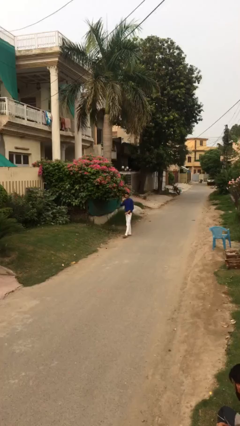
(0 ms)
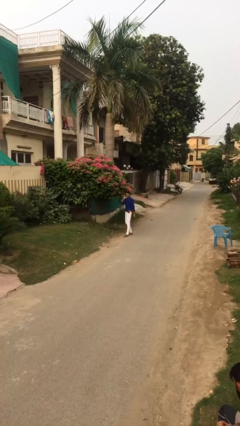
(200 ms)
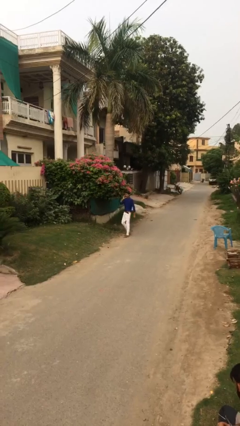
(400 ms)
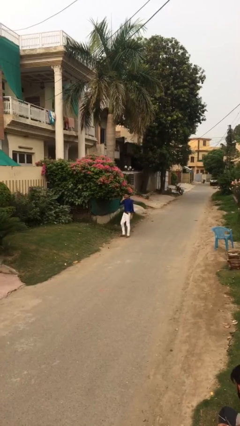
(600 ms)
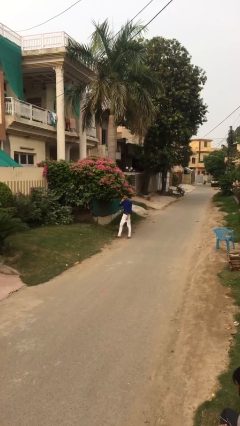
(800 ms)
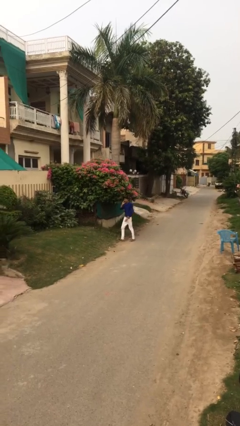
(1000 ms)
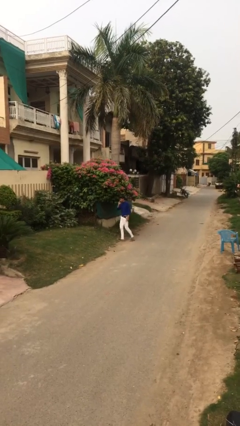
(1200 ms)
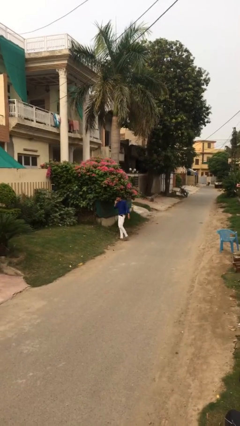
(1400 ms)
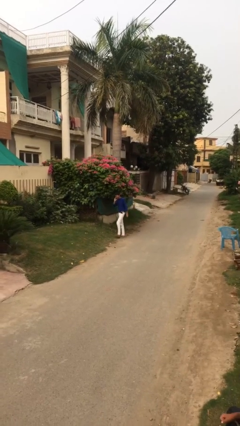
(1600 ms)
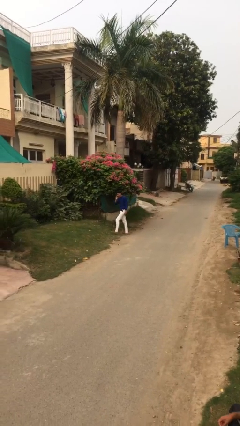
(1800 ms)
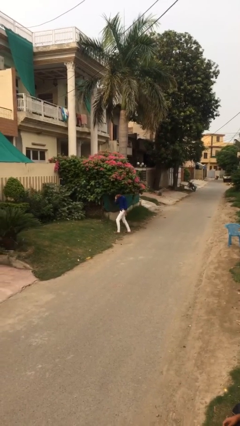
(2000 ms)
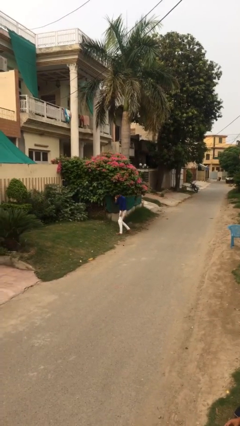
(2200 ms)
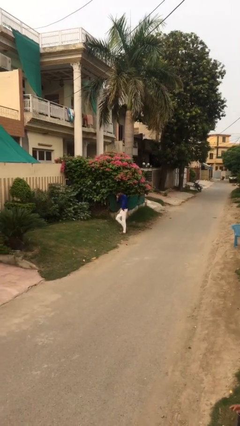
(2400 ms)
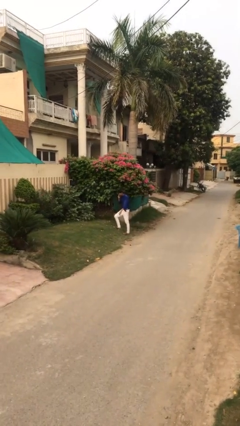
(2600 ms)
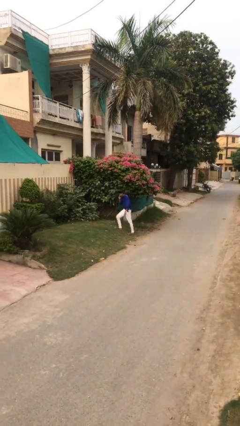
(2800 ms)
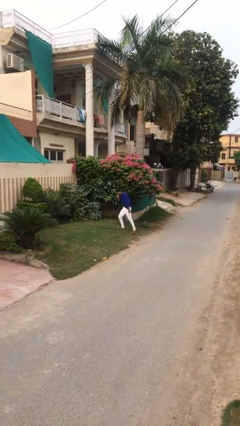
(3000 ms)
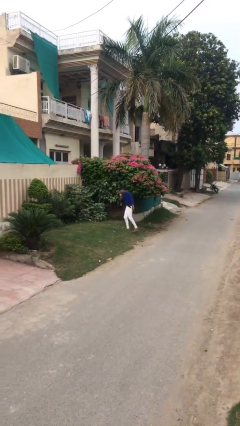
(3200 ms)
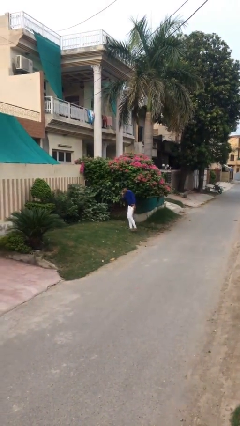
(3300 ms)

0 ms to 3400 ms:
person talks on phone

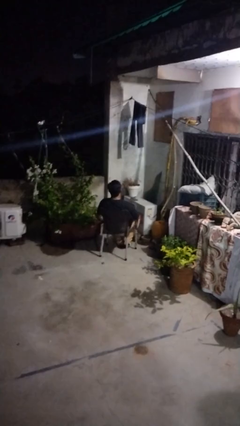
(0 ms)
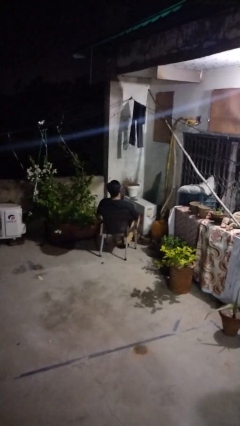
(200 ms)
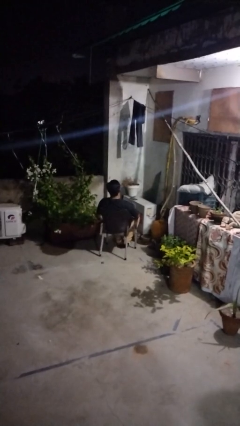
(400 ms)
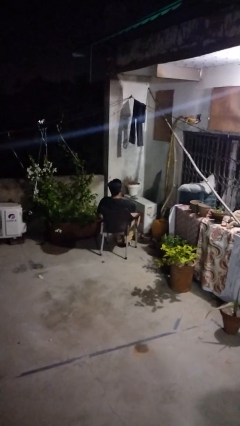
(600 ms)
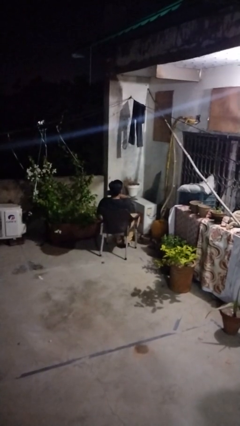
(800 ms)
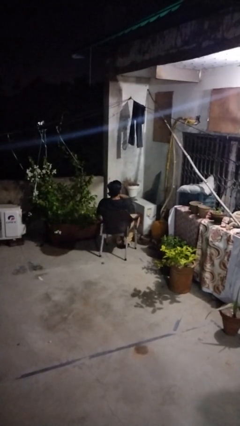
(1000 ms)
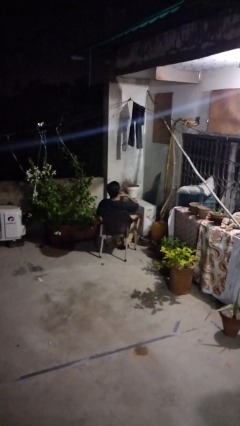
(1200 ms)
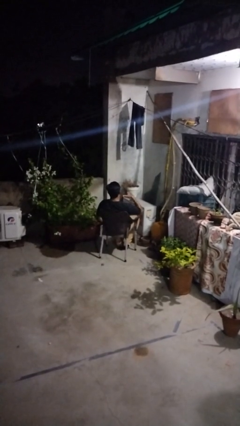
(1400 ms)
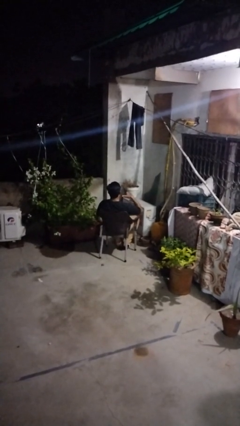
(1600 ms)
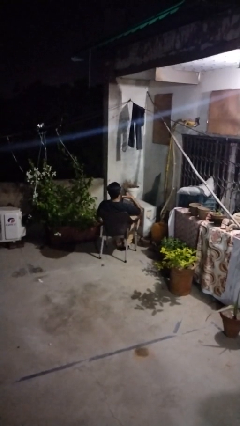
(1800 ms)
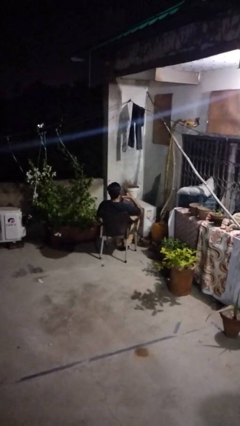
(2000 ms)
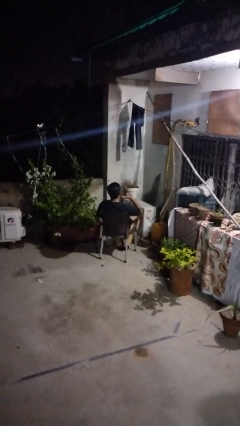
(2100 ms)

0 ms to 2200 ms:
person gestures cut

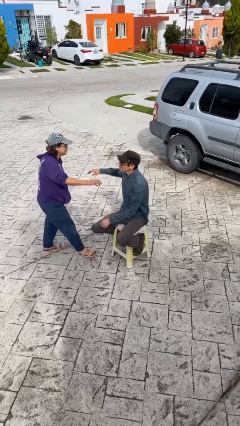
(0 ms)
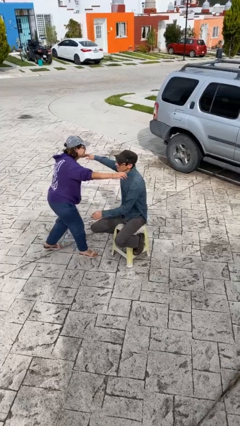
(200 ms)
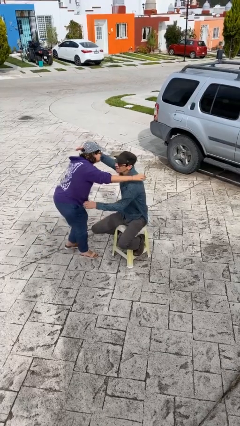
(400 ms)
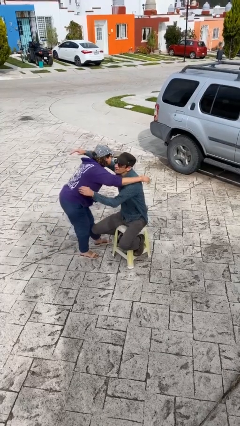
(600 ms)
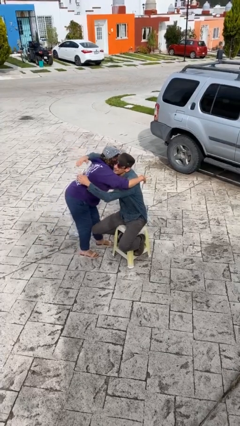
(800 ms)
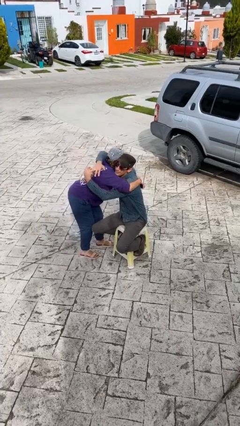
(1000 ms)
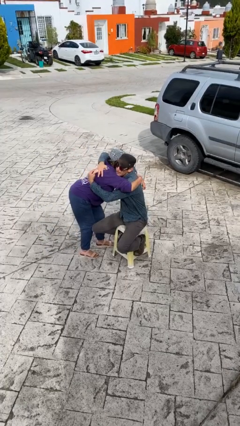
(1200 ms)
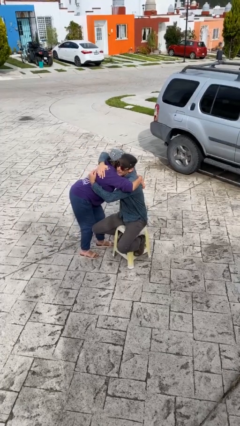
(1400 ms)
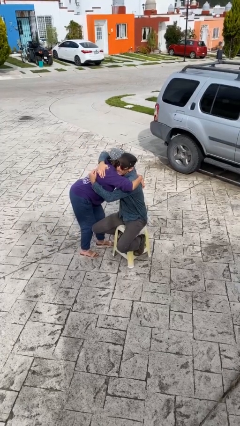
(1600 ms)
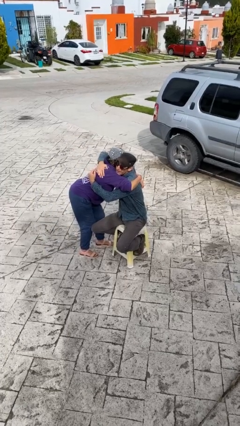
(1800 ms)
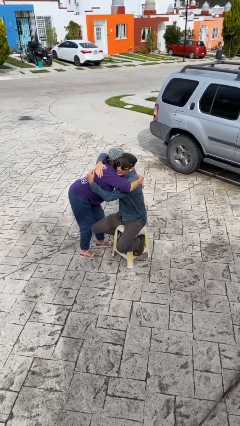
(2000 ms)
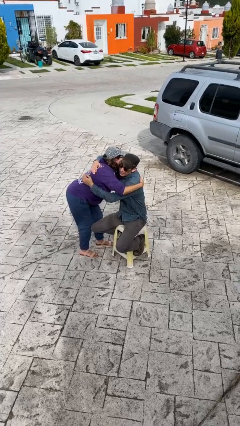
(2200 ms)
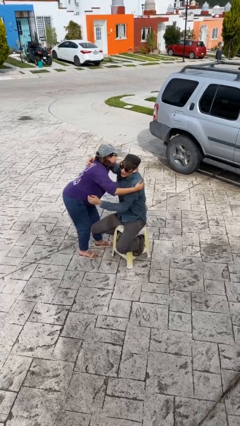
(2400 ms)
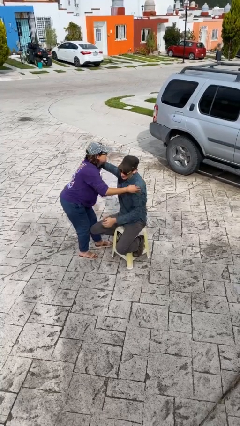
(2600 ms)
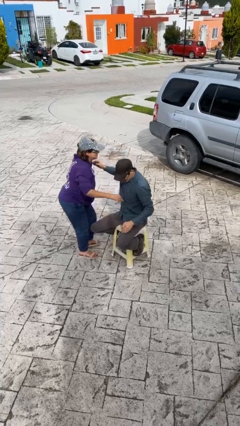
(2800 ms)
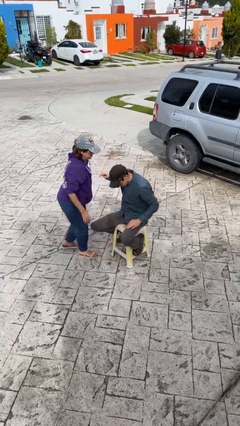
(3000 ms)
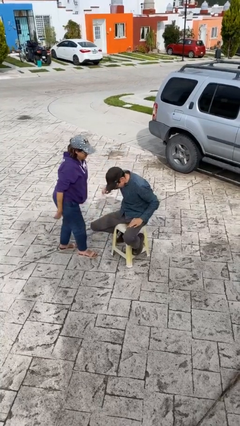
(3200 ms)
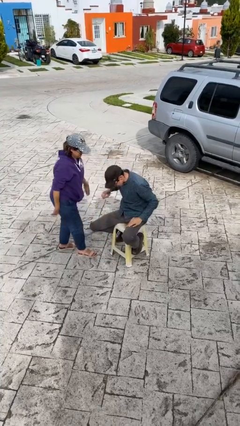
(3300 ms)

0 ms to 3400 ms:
person embraces person

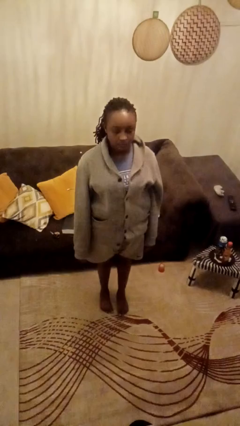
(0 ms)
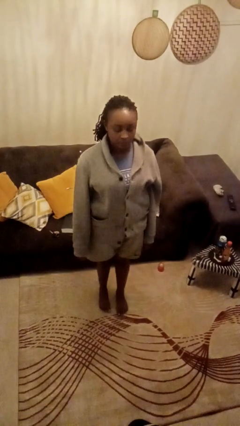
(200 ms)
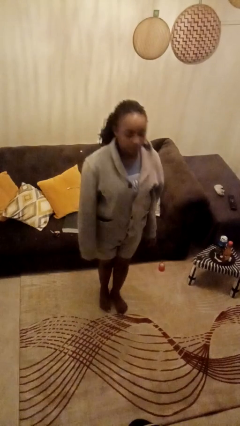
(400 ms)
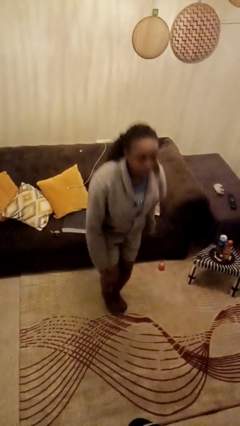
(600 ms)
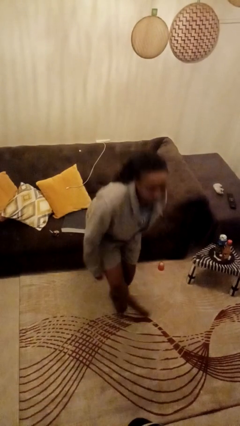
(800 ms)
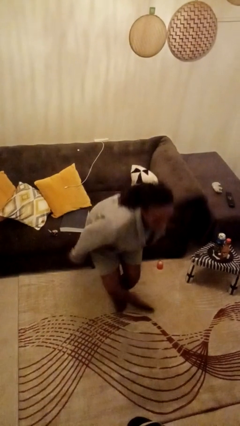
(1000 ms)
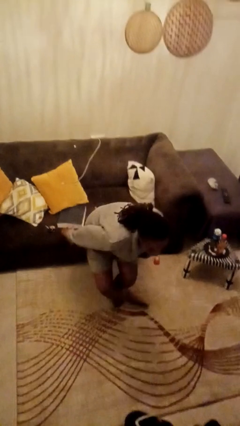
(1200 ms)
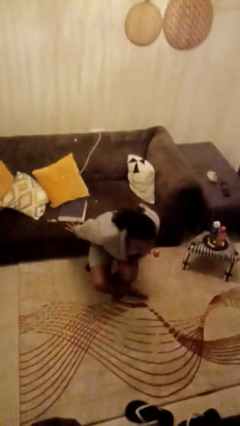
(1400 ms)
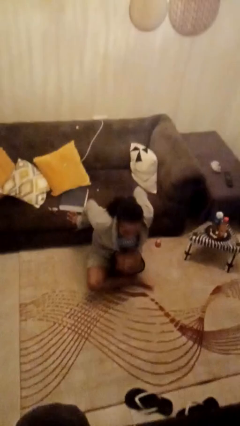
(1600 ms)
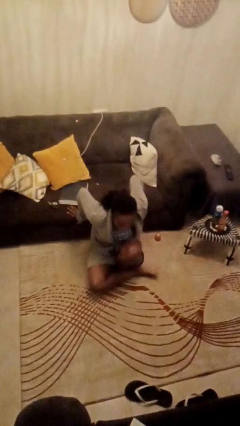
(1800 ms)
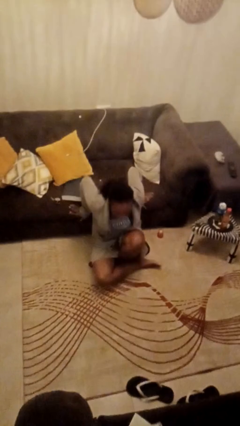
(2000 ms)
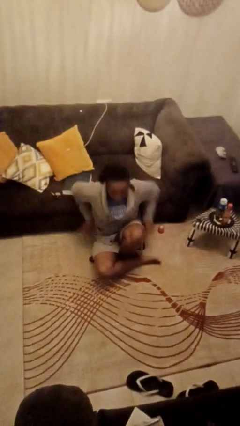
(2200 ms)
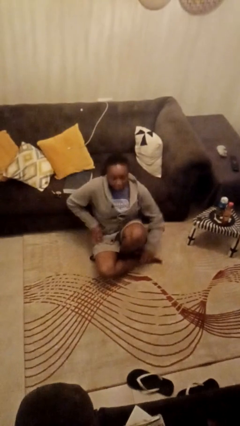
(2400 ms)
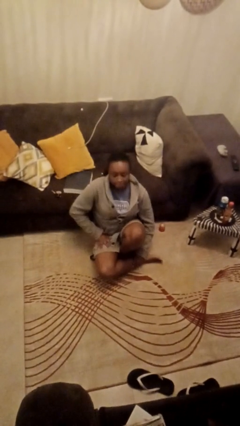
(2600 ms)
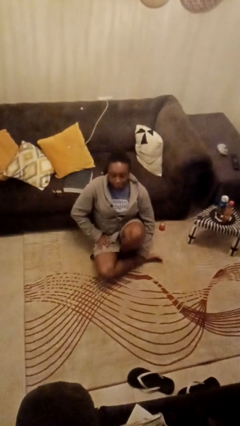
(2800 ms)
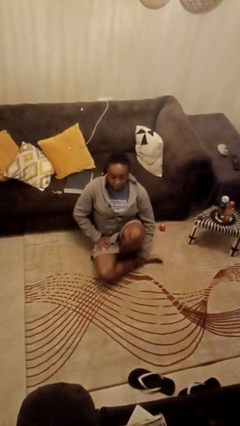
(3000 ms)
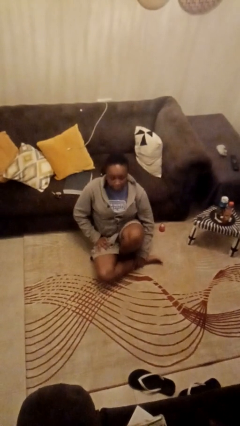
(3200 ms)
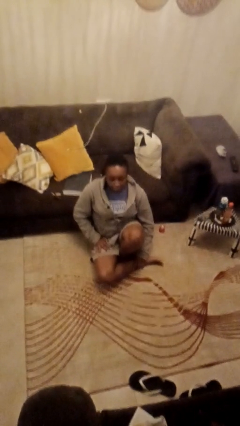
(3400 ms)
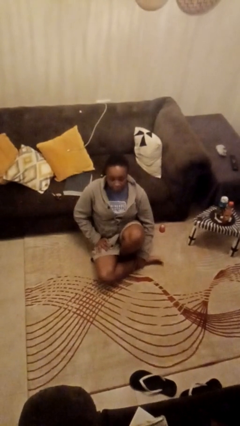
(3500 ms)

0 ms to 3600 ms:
person sits crisscross

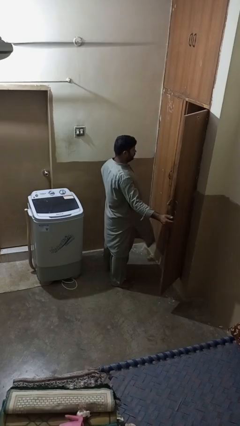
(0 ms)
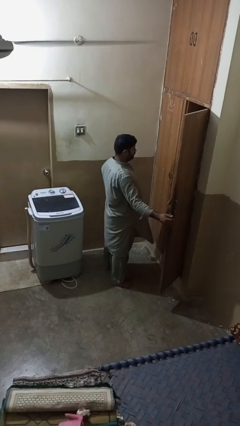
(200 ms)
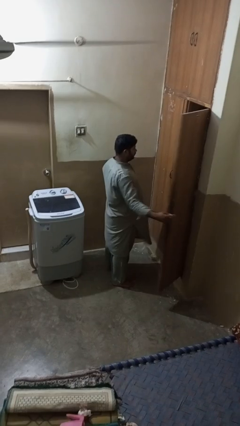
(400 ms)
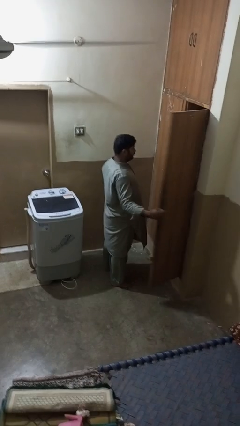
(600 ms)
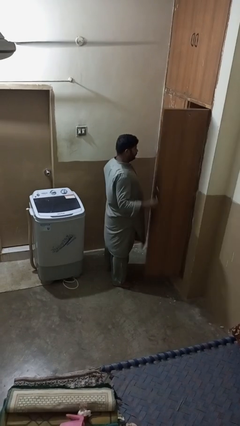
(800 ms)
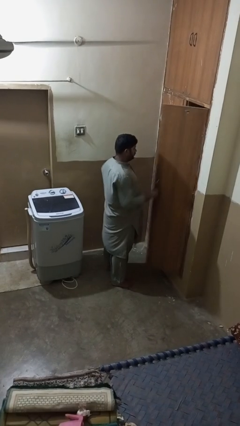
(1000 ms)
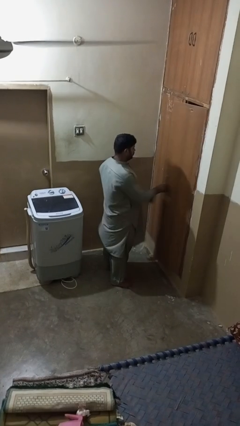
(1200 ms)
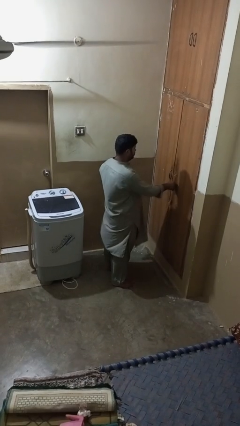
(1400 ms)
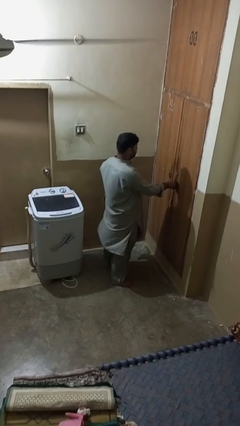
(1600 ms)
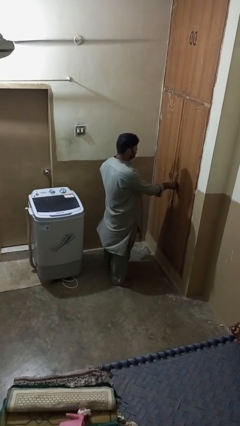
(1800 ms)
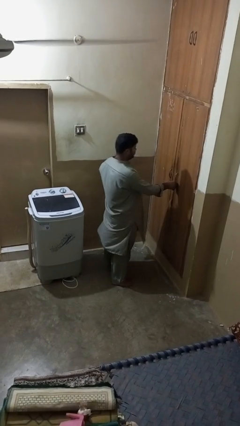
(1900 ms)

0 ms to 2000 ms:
person closes closet door

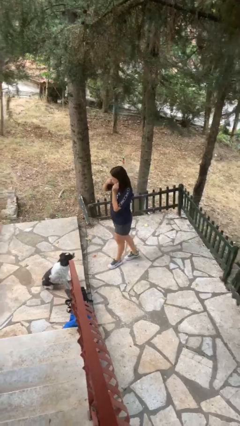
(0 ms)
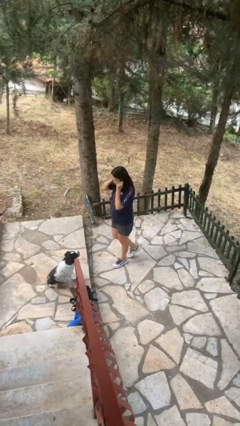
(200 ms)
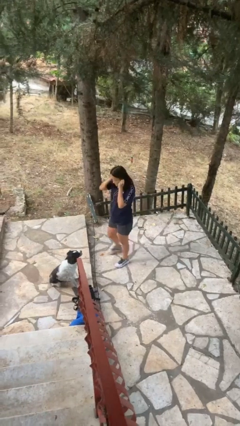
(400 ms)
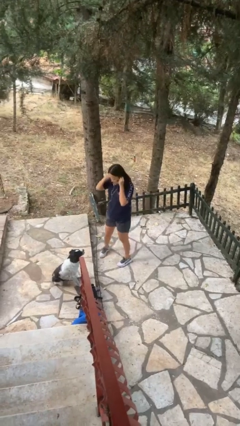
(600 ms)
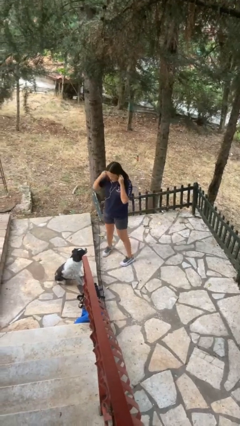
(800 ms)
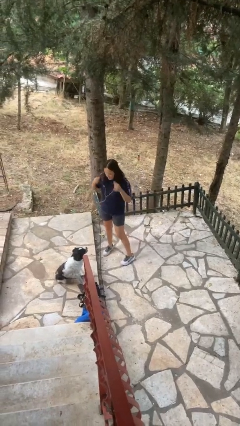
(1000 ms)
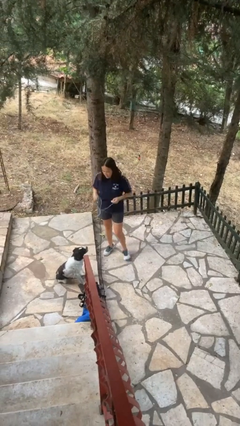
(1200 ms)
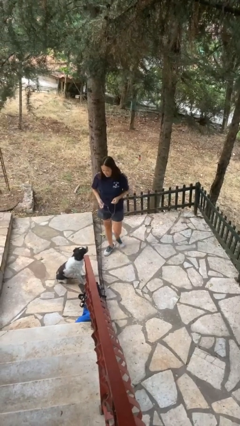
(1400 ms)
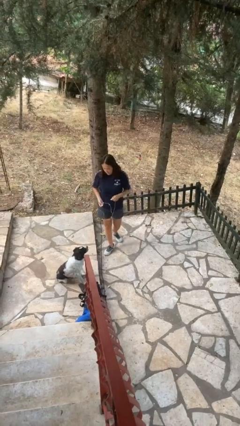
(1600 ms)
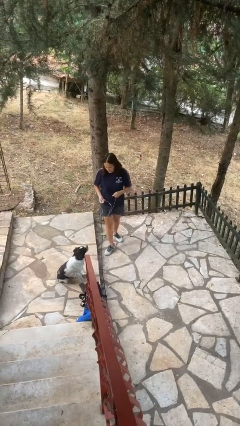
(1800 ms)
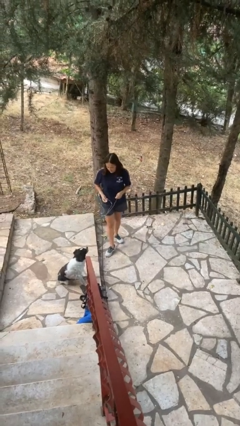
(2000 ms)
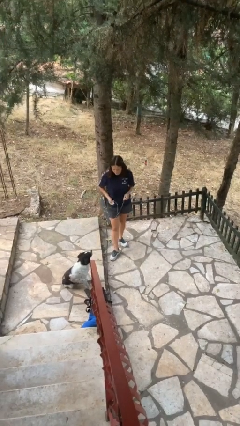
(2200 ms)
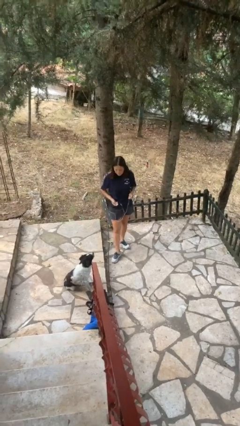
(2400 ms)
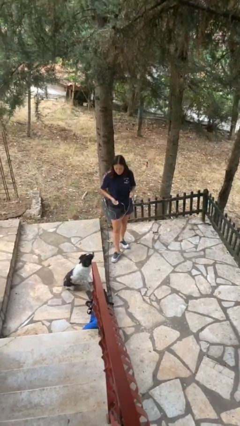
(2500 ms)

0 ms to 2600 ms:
person takes off headphones

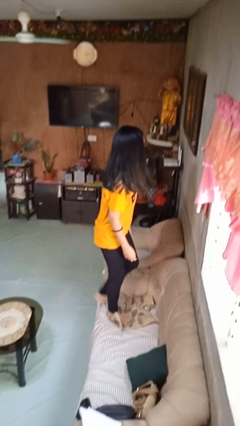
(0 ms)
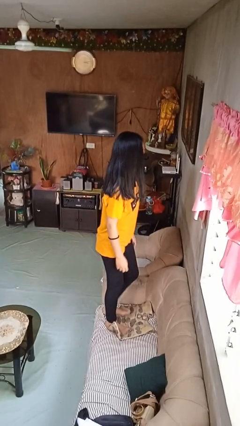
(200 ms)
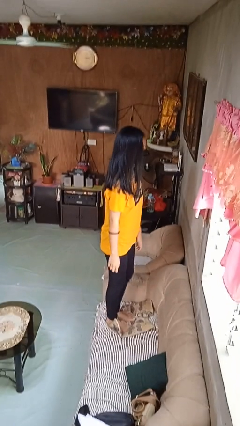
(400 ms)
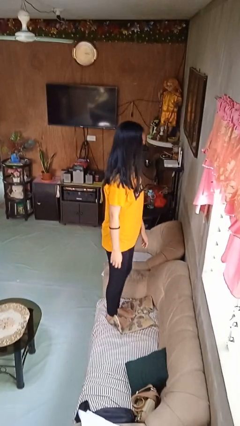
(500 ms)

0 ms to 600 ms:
person climbs on couch
